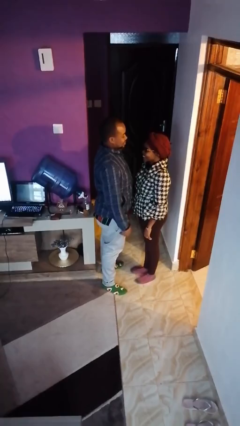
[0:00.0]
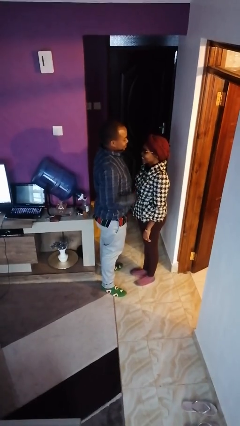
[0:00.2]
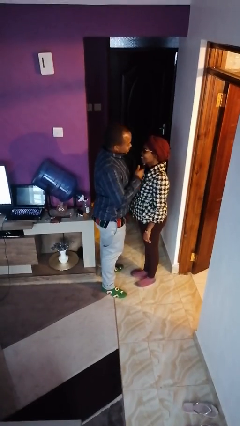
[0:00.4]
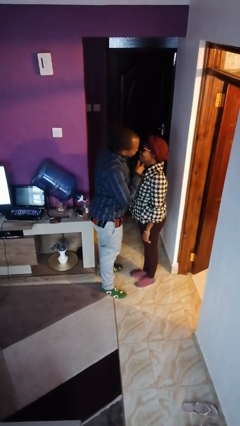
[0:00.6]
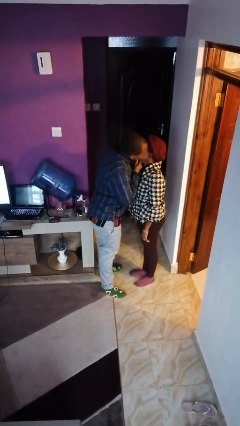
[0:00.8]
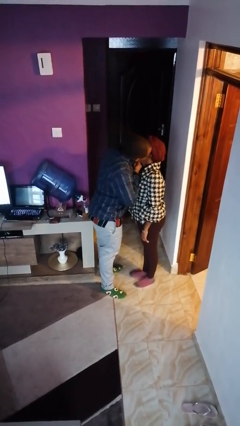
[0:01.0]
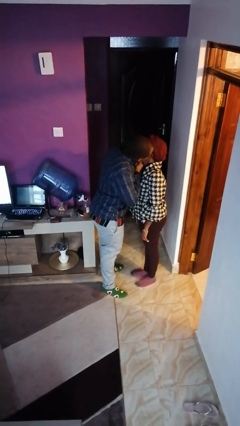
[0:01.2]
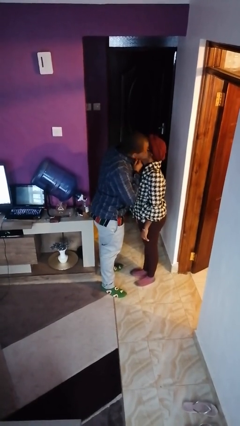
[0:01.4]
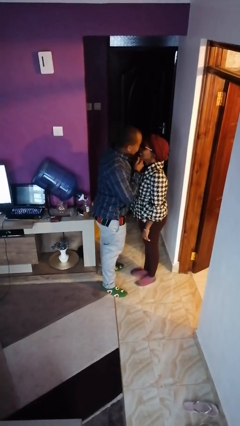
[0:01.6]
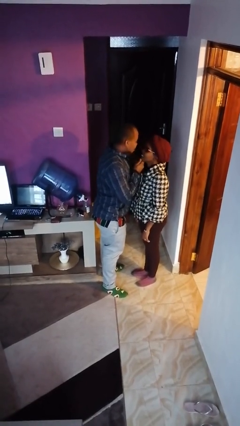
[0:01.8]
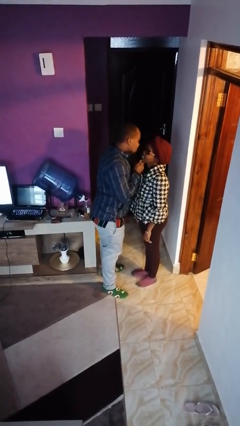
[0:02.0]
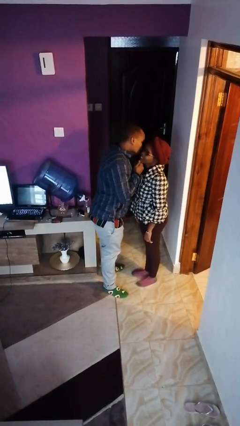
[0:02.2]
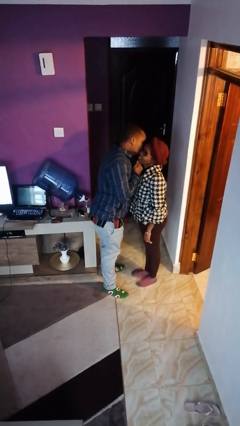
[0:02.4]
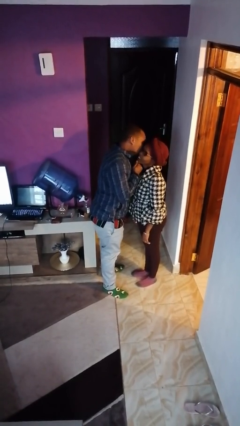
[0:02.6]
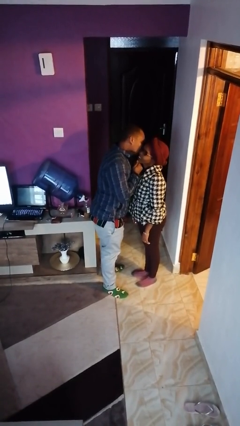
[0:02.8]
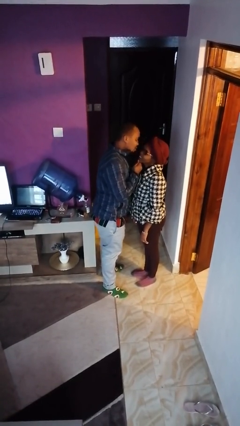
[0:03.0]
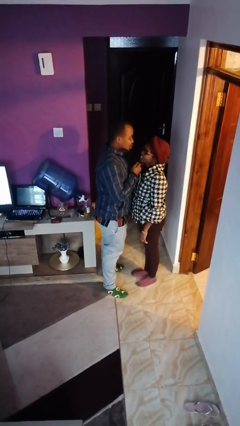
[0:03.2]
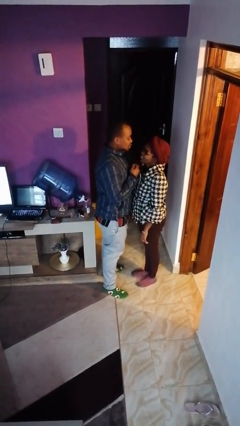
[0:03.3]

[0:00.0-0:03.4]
person kisses cheek of person

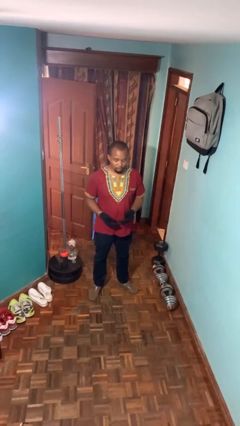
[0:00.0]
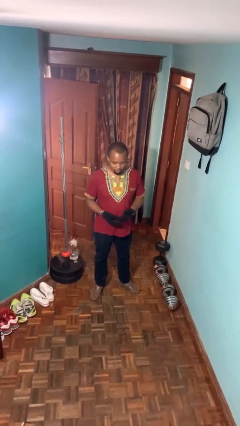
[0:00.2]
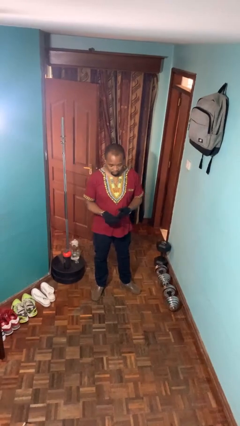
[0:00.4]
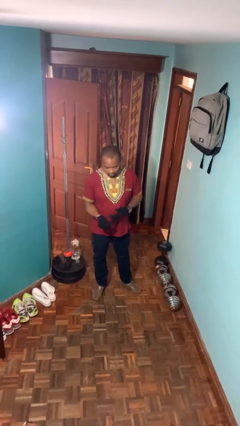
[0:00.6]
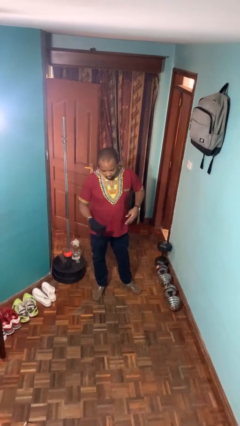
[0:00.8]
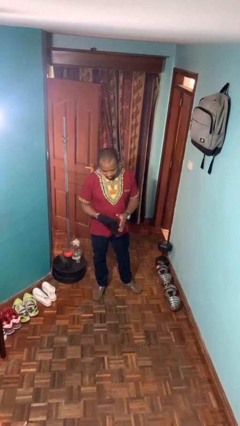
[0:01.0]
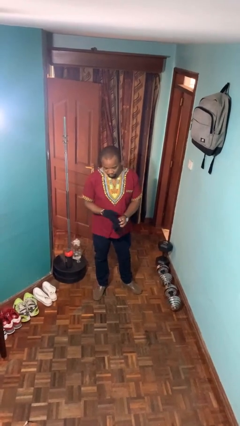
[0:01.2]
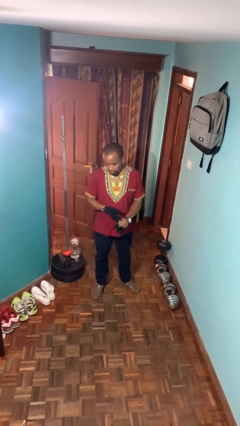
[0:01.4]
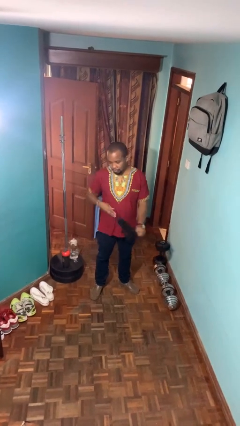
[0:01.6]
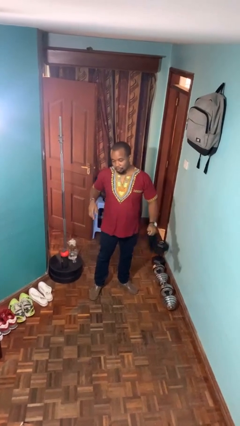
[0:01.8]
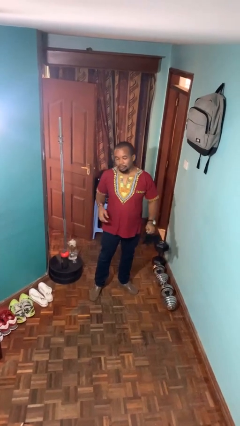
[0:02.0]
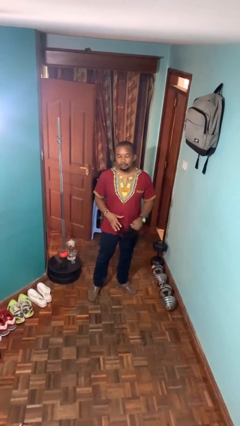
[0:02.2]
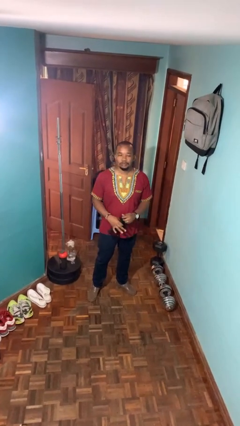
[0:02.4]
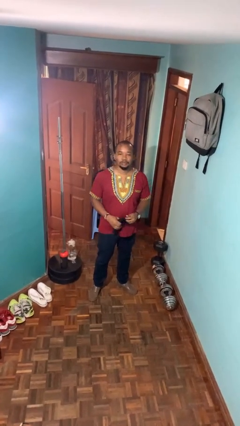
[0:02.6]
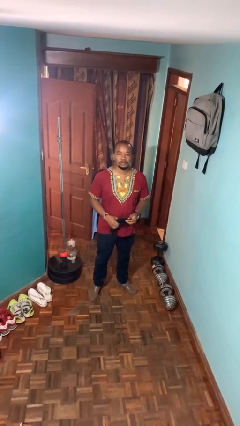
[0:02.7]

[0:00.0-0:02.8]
person takes off gloves

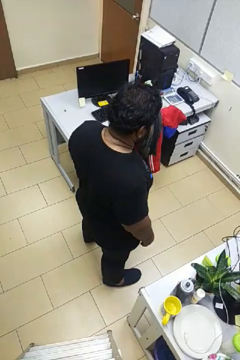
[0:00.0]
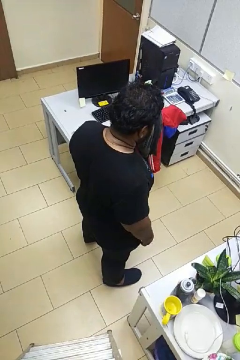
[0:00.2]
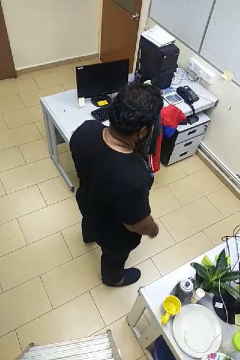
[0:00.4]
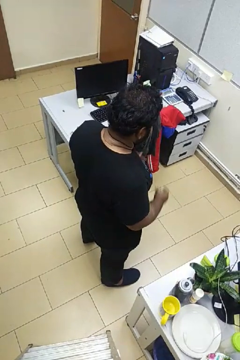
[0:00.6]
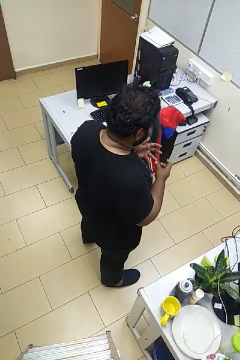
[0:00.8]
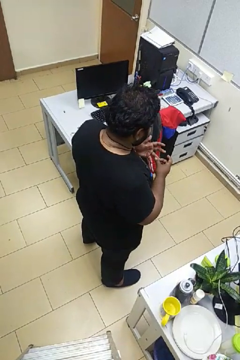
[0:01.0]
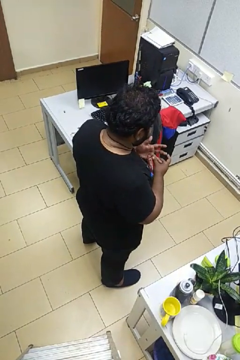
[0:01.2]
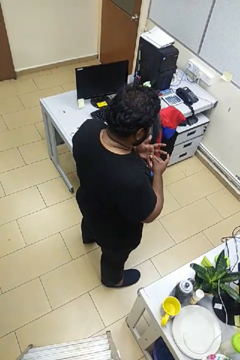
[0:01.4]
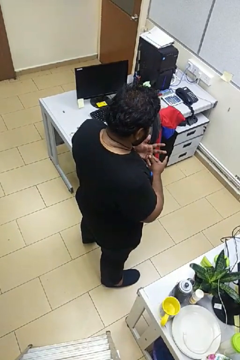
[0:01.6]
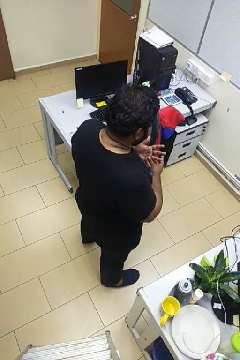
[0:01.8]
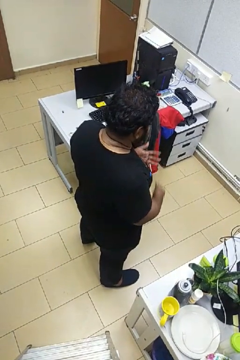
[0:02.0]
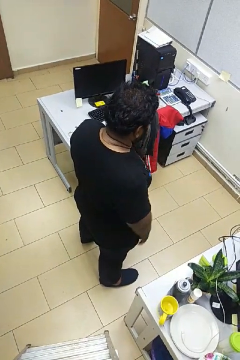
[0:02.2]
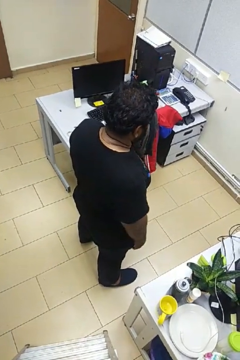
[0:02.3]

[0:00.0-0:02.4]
person puts on ring

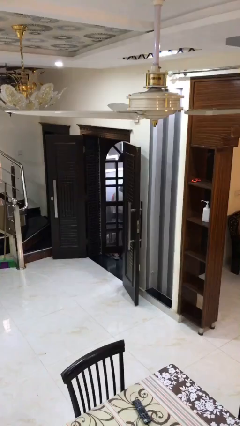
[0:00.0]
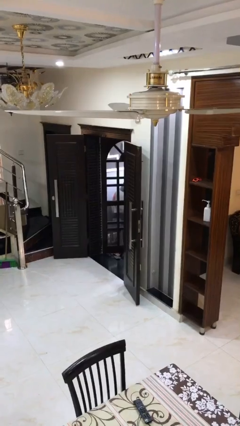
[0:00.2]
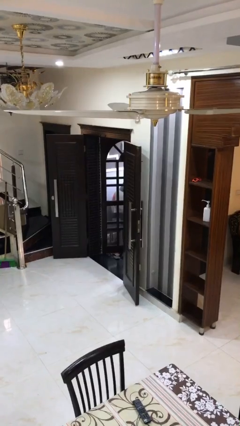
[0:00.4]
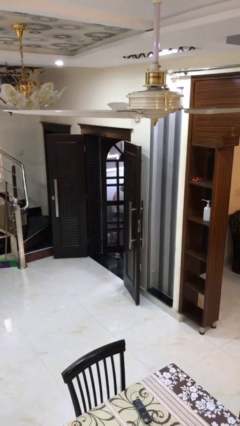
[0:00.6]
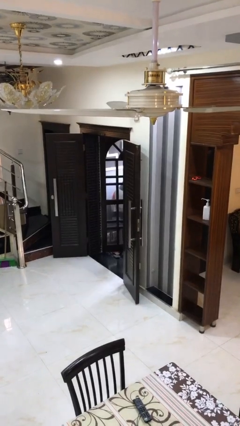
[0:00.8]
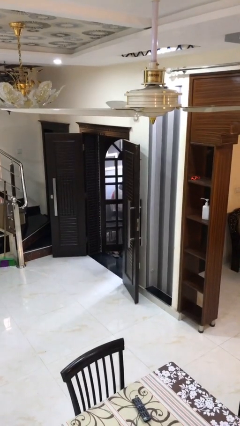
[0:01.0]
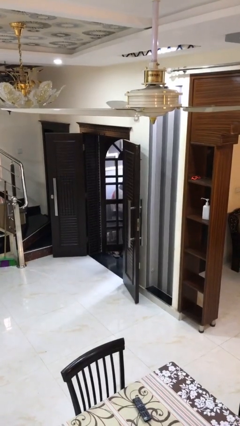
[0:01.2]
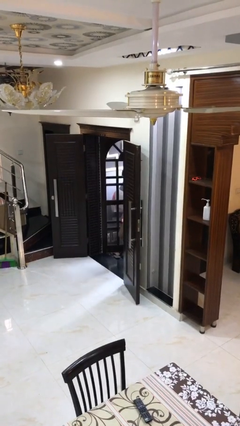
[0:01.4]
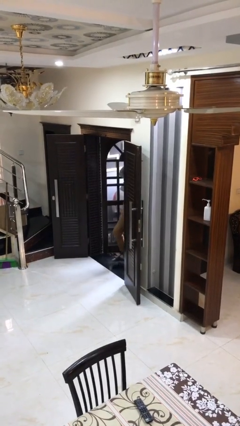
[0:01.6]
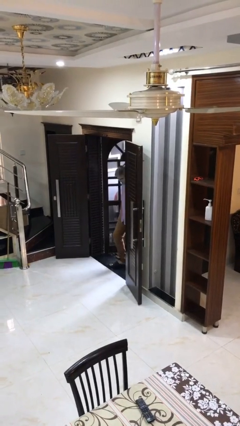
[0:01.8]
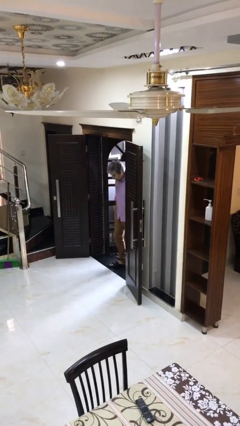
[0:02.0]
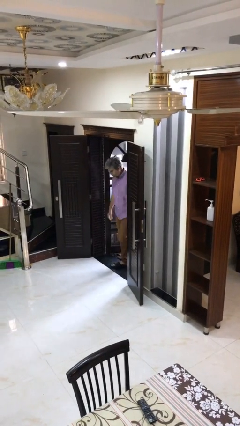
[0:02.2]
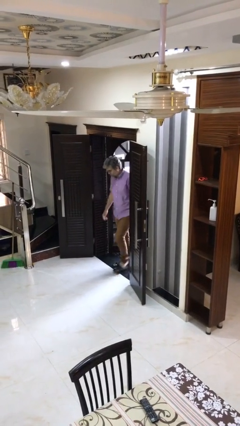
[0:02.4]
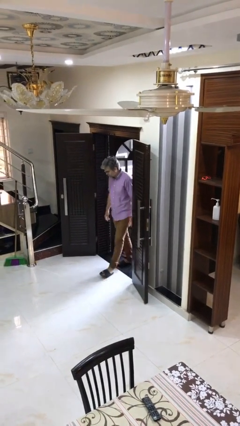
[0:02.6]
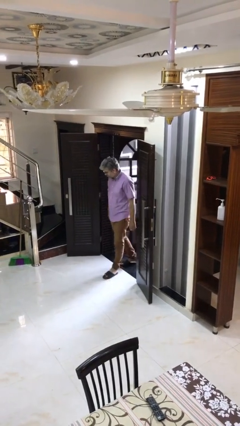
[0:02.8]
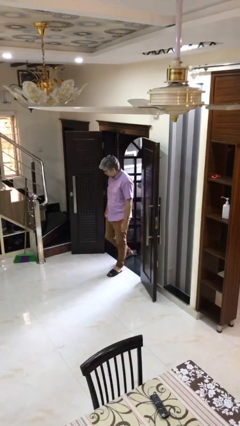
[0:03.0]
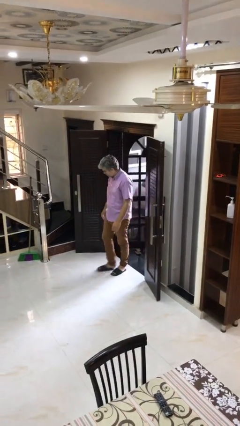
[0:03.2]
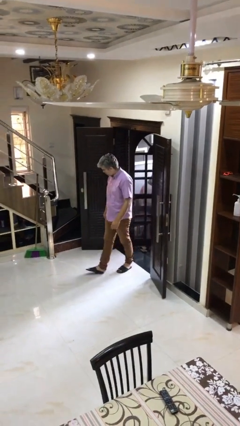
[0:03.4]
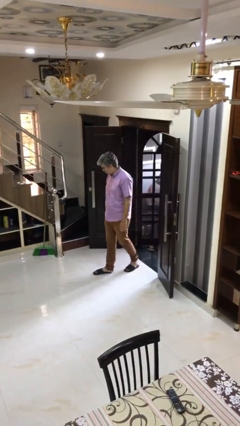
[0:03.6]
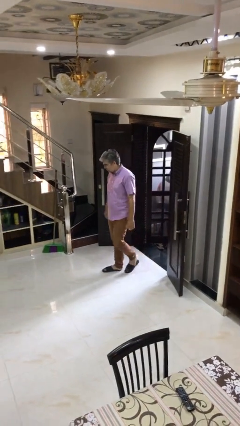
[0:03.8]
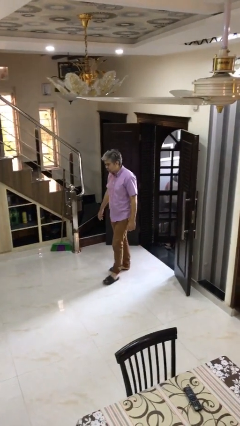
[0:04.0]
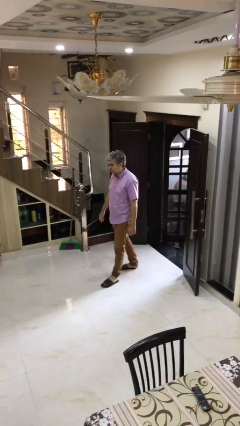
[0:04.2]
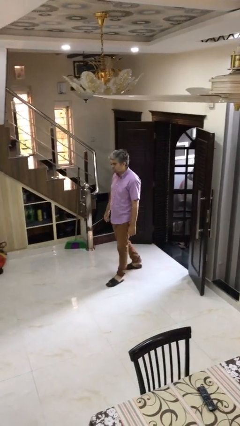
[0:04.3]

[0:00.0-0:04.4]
person enters scene through structure

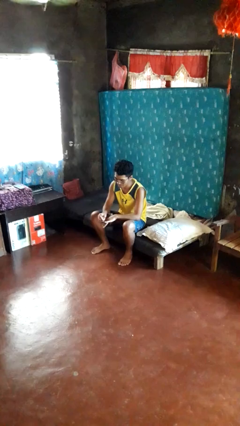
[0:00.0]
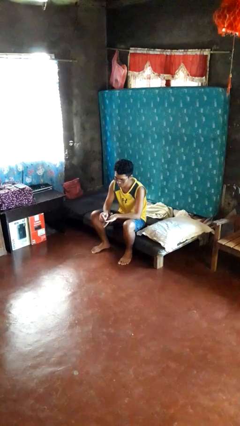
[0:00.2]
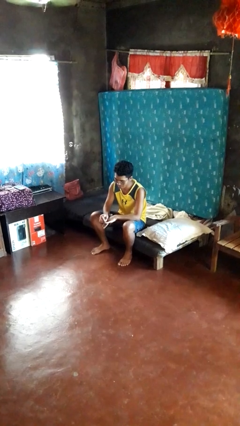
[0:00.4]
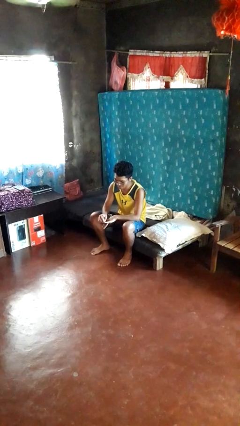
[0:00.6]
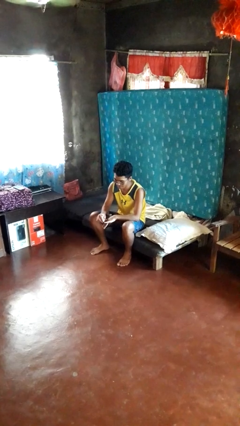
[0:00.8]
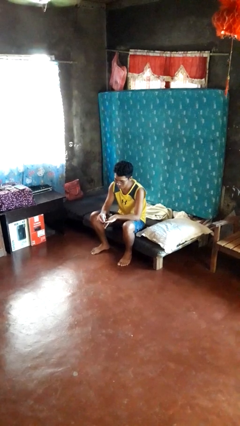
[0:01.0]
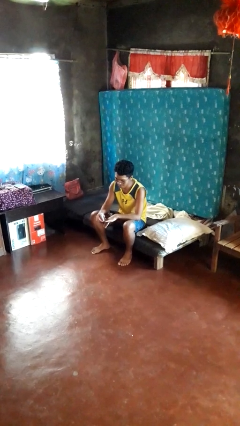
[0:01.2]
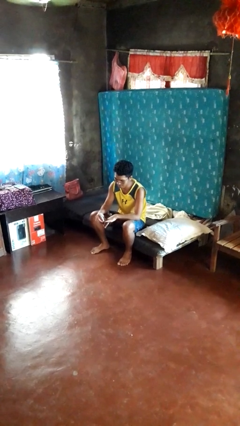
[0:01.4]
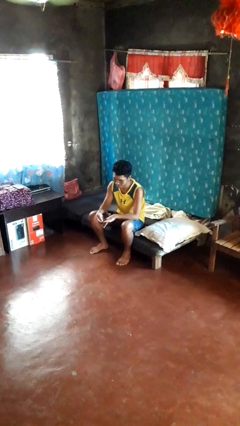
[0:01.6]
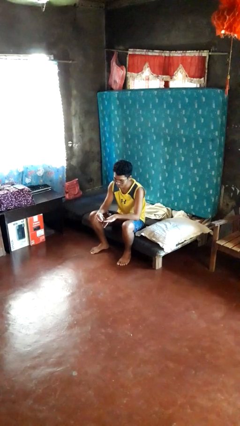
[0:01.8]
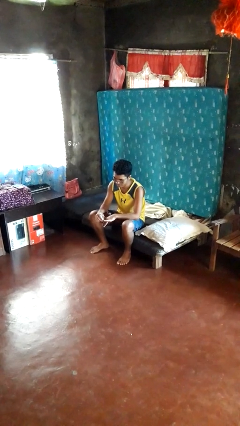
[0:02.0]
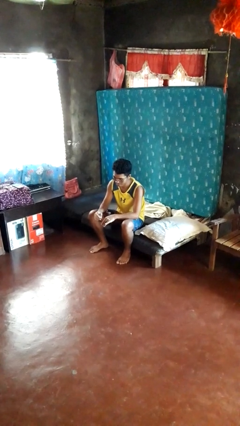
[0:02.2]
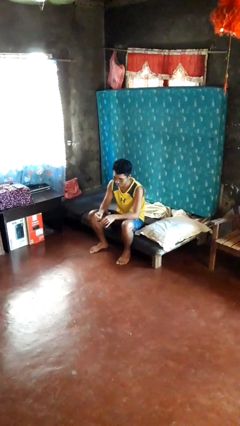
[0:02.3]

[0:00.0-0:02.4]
person files fingernails

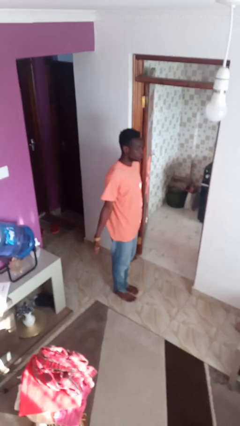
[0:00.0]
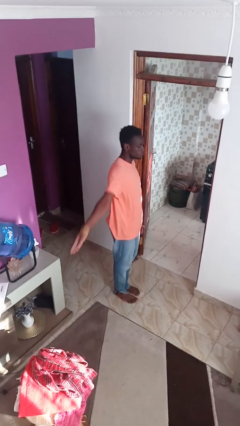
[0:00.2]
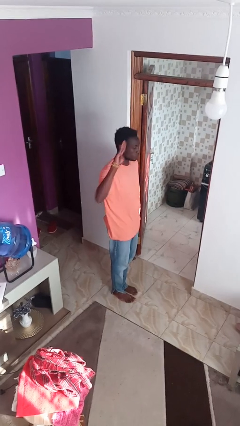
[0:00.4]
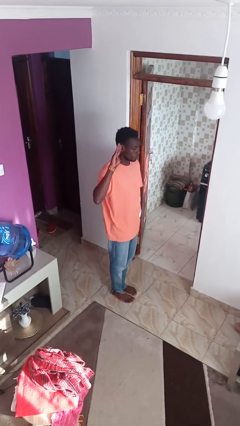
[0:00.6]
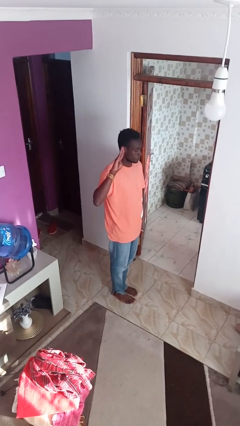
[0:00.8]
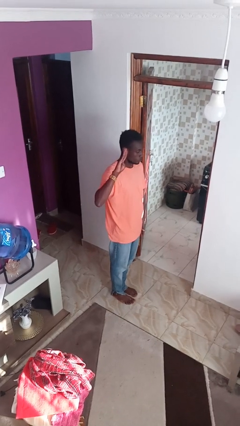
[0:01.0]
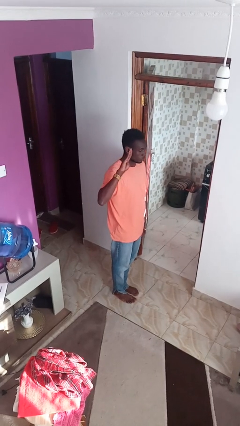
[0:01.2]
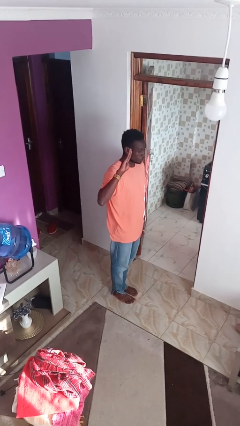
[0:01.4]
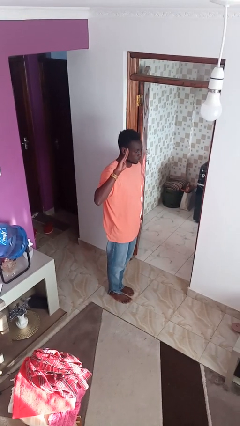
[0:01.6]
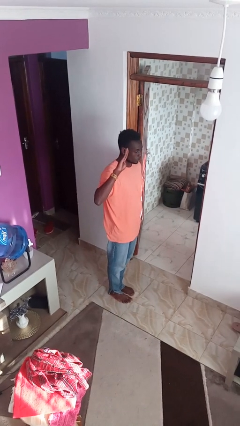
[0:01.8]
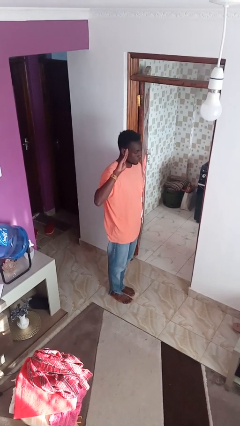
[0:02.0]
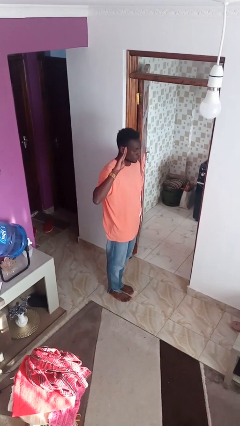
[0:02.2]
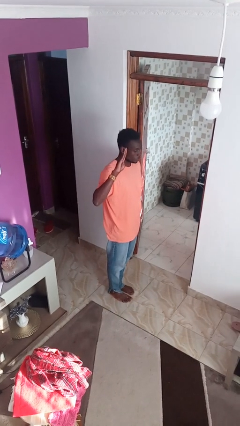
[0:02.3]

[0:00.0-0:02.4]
person salutes

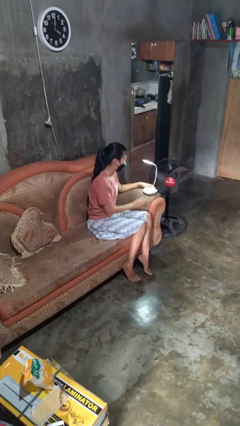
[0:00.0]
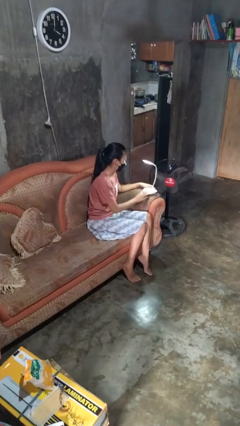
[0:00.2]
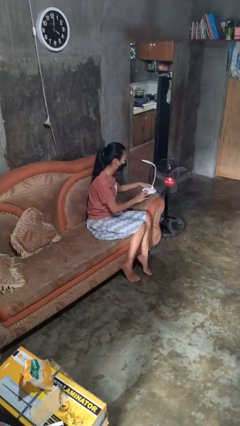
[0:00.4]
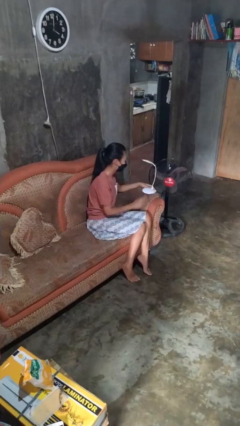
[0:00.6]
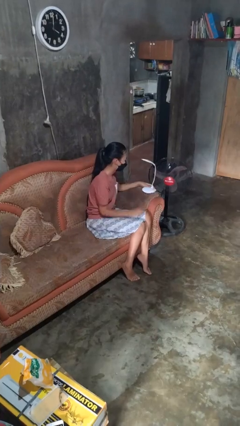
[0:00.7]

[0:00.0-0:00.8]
person turns off lamp
